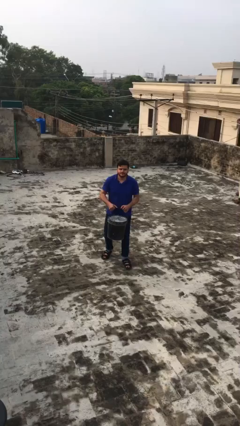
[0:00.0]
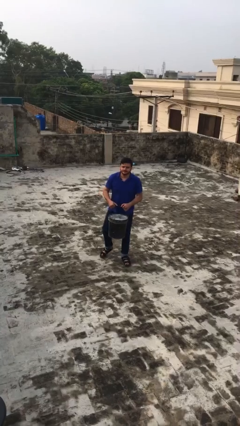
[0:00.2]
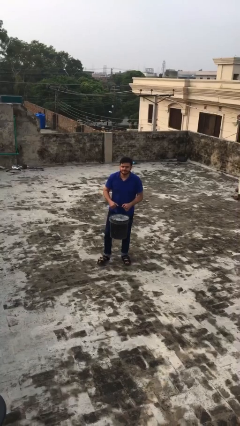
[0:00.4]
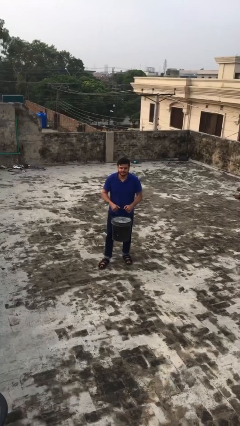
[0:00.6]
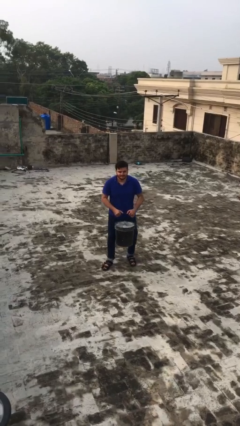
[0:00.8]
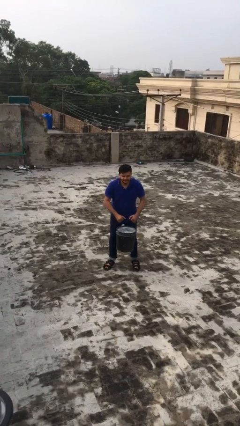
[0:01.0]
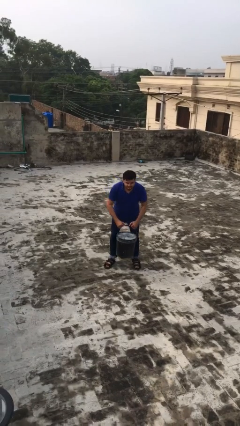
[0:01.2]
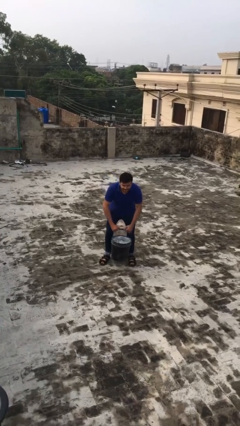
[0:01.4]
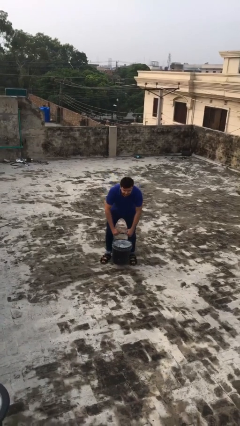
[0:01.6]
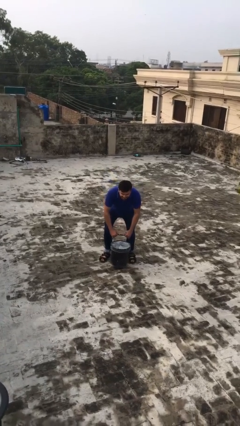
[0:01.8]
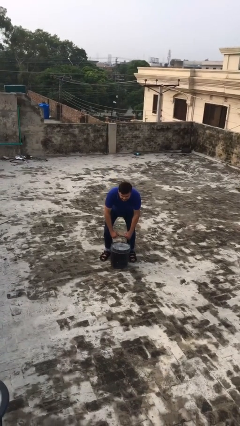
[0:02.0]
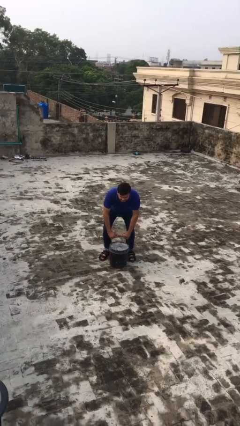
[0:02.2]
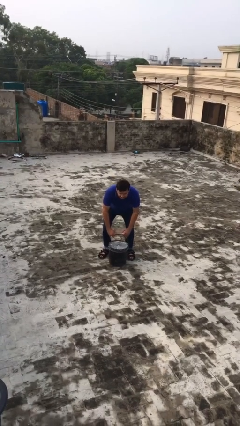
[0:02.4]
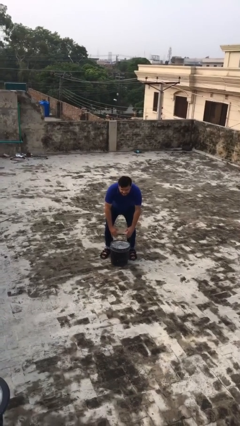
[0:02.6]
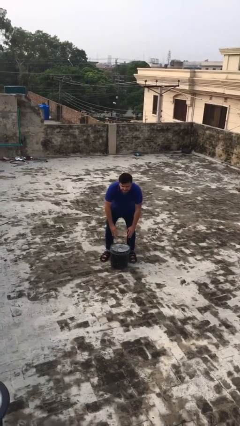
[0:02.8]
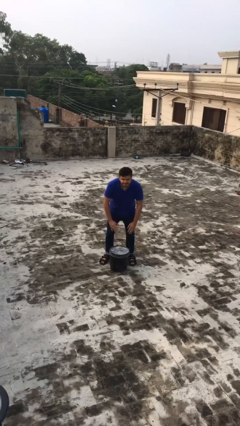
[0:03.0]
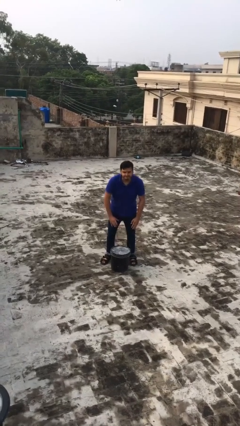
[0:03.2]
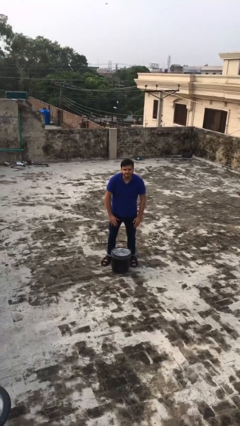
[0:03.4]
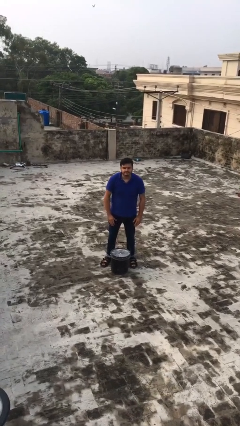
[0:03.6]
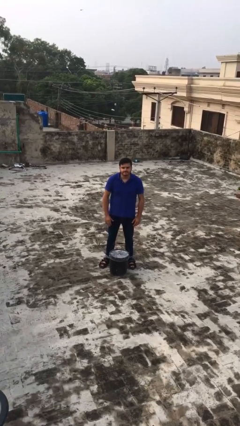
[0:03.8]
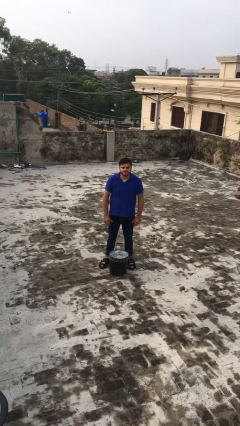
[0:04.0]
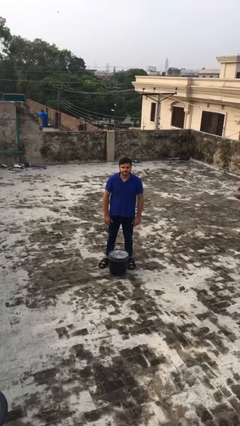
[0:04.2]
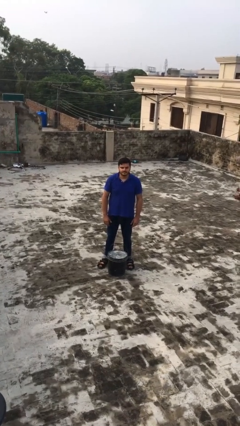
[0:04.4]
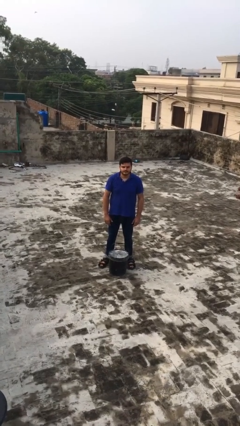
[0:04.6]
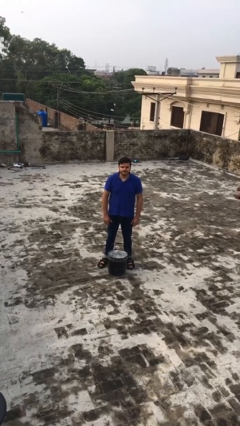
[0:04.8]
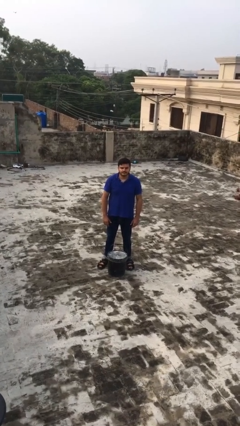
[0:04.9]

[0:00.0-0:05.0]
person puts down object on floor

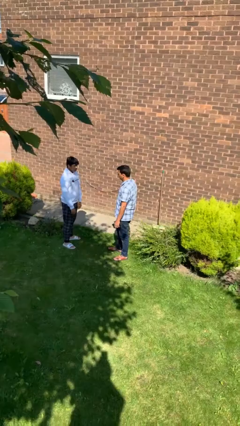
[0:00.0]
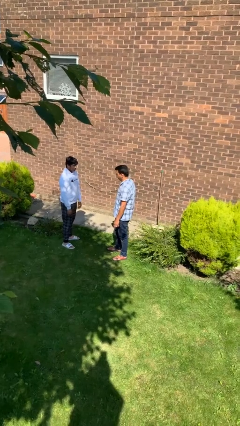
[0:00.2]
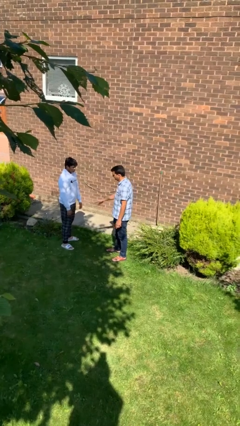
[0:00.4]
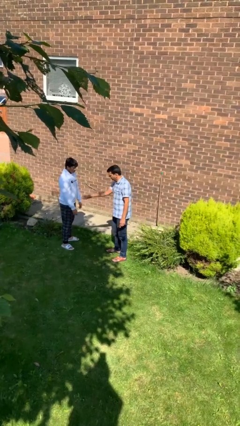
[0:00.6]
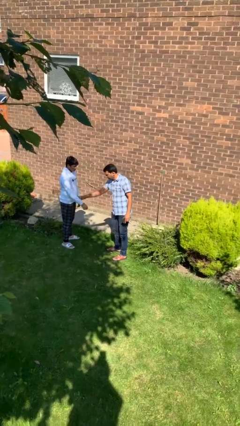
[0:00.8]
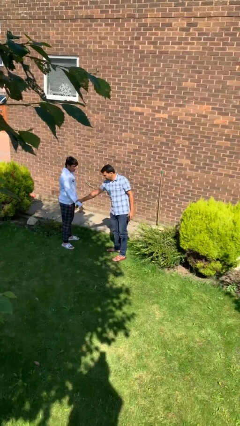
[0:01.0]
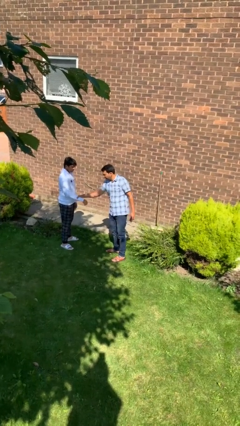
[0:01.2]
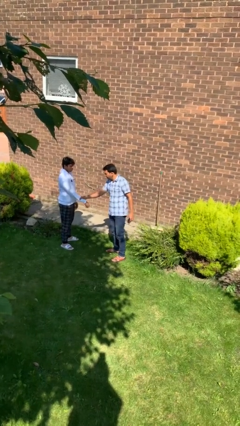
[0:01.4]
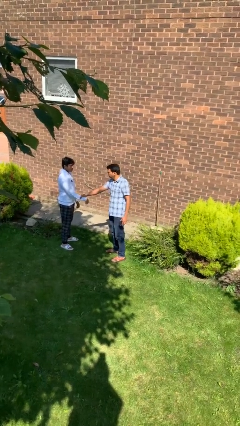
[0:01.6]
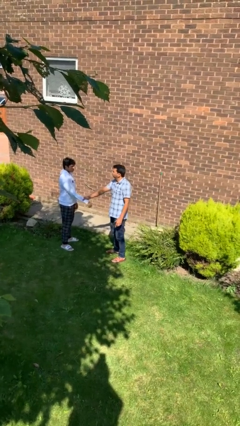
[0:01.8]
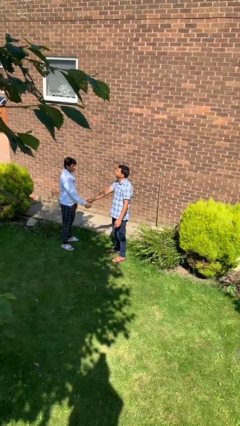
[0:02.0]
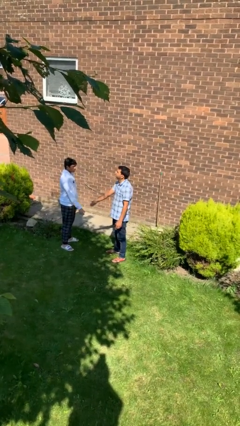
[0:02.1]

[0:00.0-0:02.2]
person grabs person by forearm

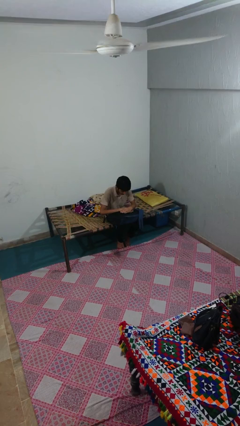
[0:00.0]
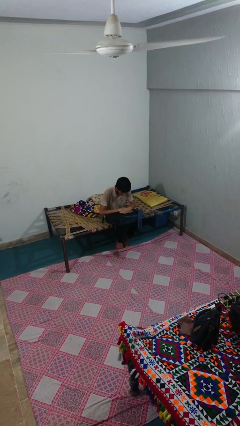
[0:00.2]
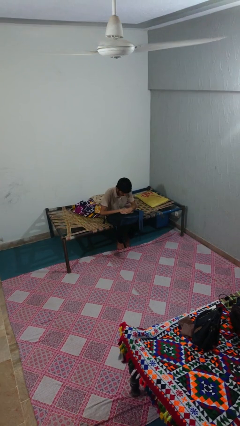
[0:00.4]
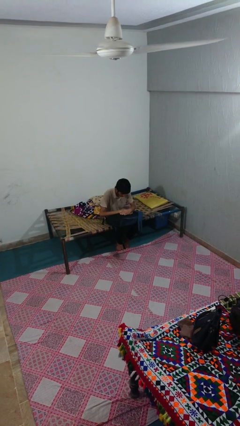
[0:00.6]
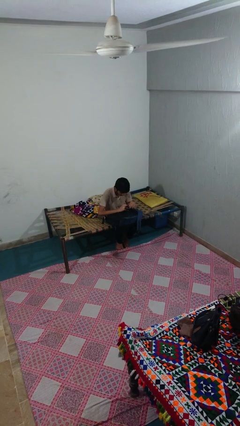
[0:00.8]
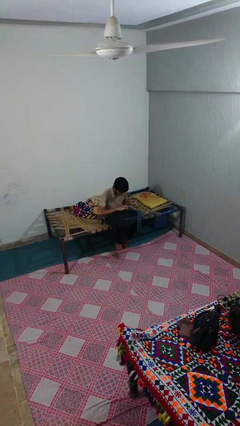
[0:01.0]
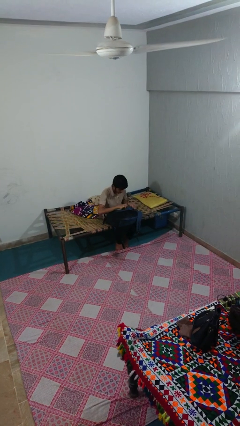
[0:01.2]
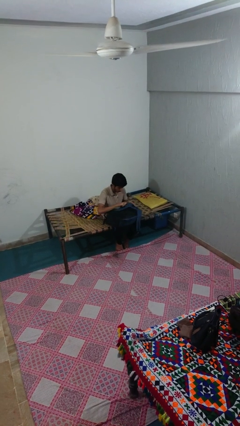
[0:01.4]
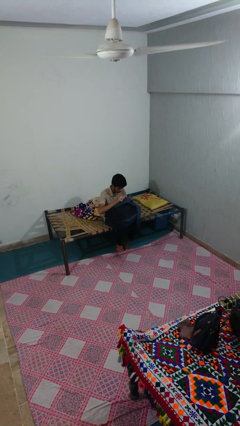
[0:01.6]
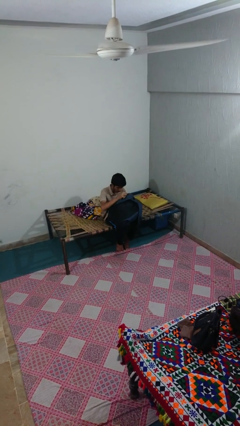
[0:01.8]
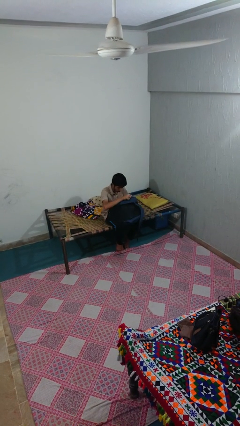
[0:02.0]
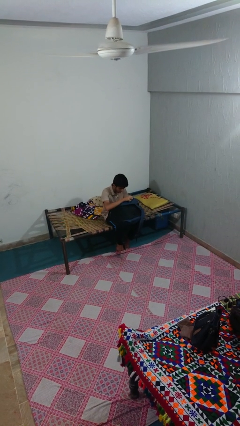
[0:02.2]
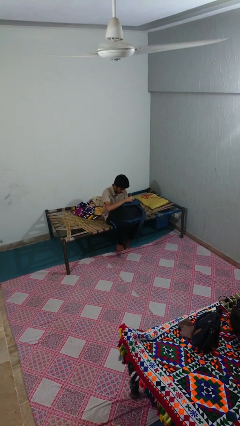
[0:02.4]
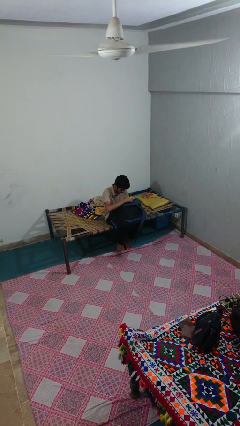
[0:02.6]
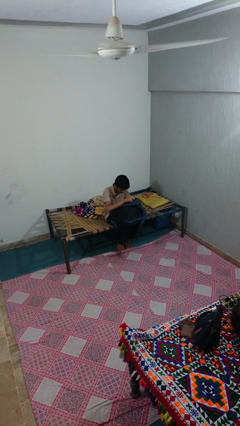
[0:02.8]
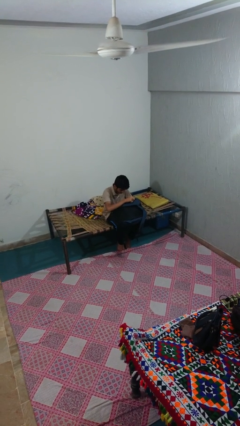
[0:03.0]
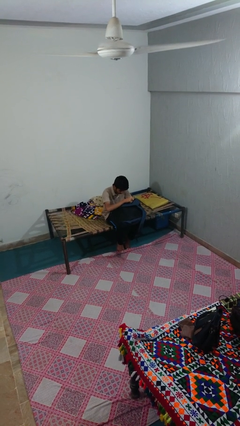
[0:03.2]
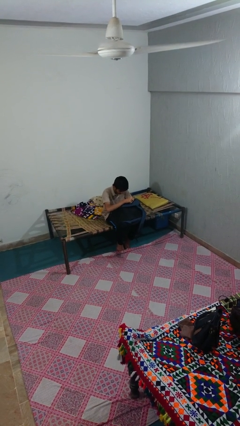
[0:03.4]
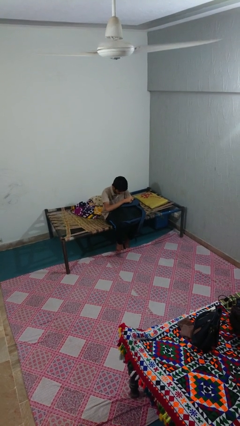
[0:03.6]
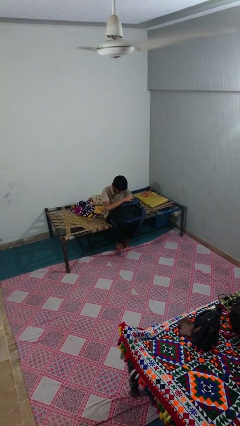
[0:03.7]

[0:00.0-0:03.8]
person searches in backpack

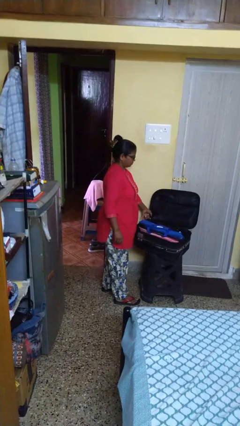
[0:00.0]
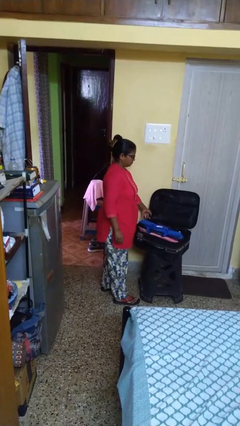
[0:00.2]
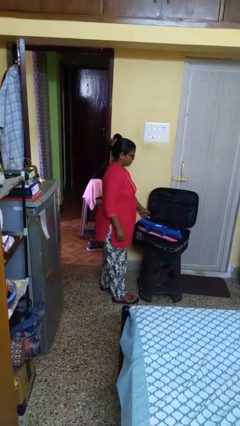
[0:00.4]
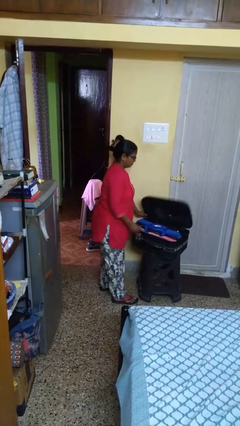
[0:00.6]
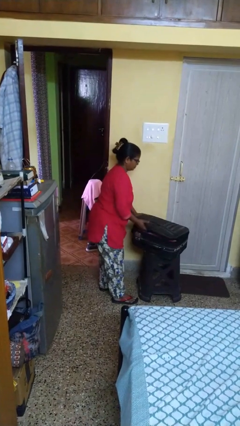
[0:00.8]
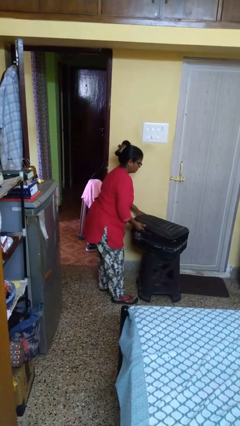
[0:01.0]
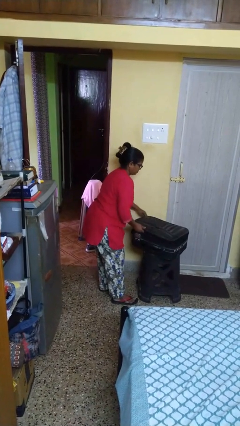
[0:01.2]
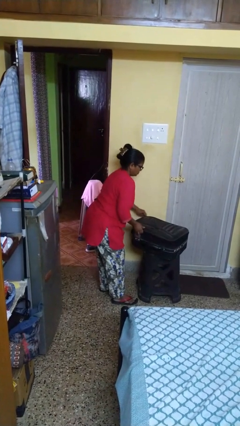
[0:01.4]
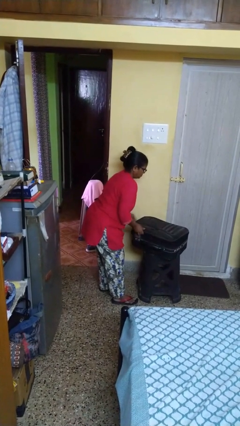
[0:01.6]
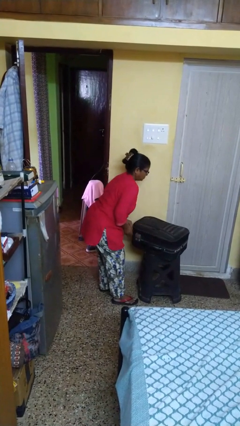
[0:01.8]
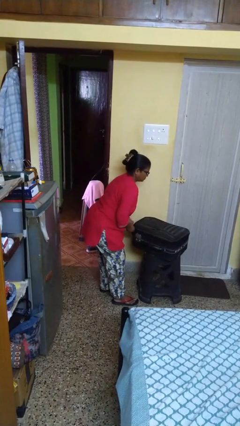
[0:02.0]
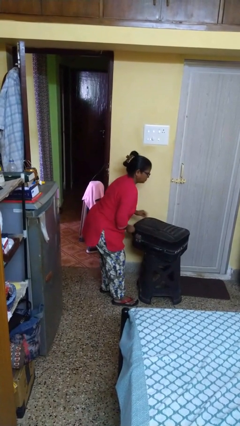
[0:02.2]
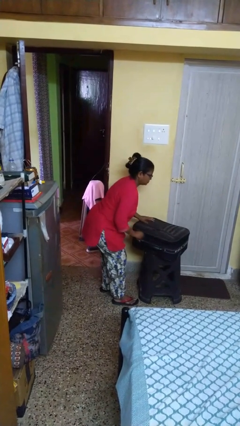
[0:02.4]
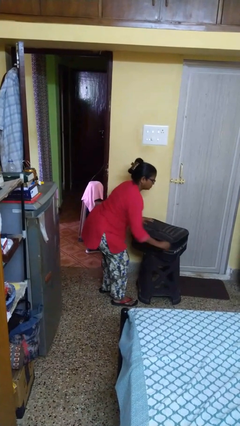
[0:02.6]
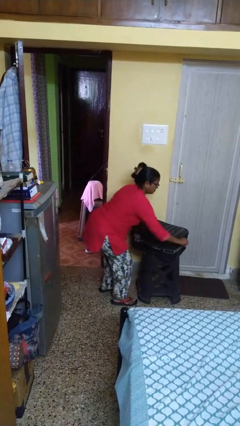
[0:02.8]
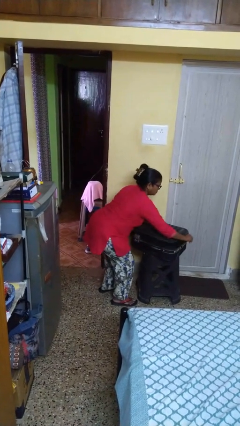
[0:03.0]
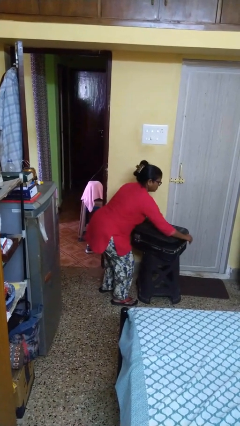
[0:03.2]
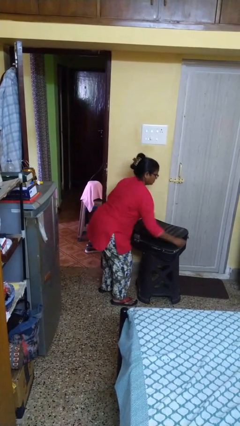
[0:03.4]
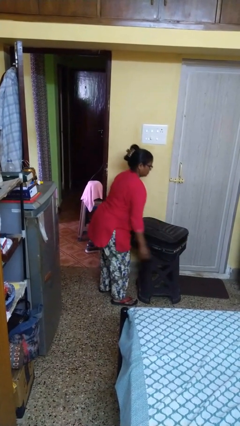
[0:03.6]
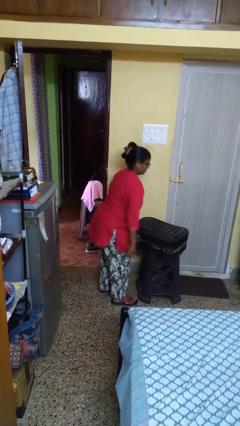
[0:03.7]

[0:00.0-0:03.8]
person closes suitcase

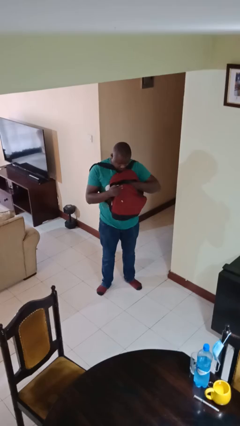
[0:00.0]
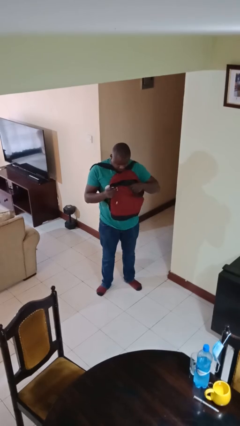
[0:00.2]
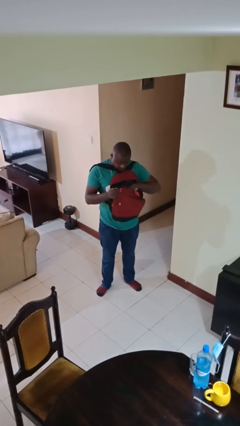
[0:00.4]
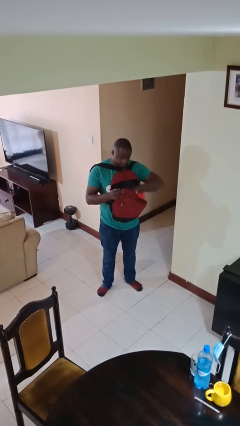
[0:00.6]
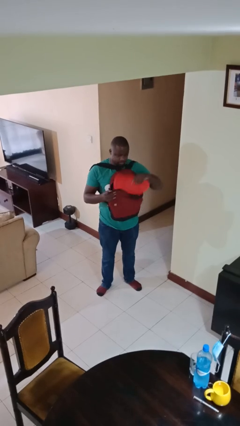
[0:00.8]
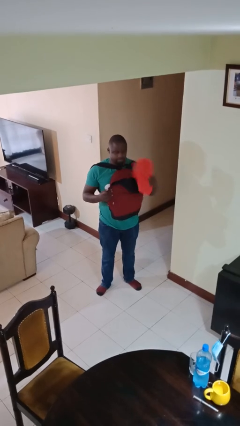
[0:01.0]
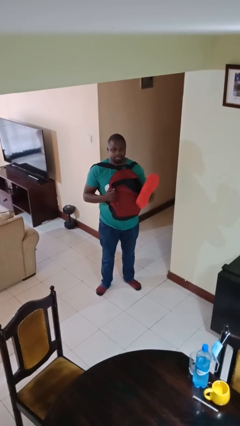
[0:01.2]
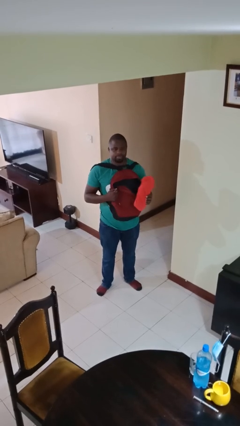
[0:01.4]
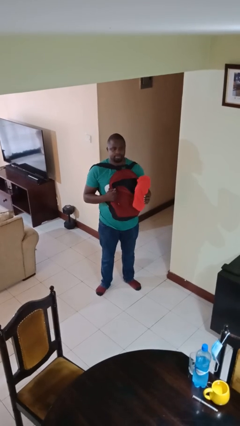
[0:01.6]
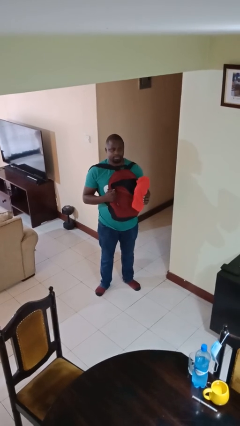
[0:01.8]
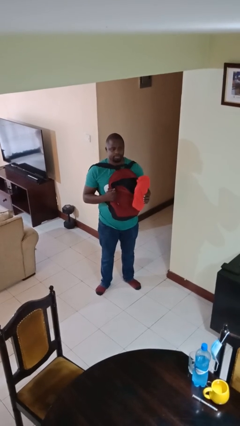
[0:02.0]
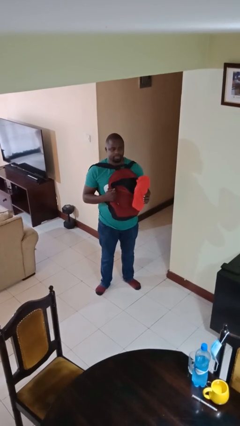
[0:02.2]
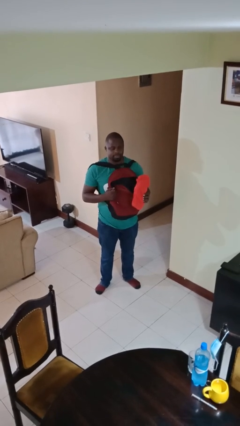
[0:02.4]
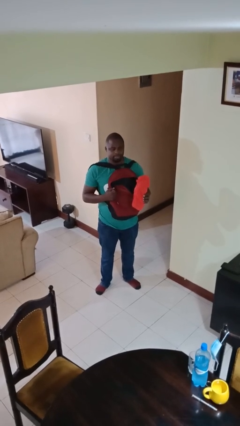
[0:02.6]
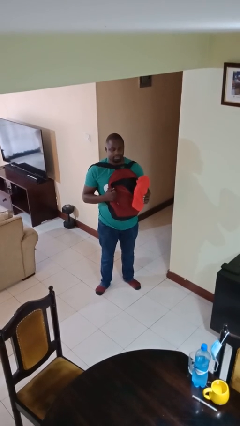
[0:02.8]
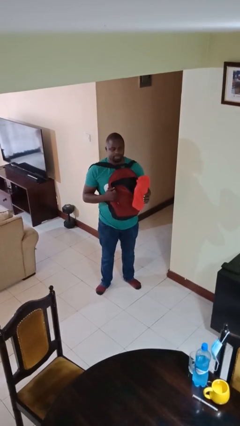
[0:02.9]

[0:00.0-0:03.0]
person takes object from backpack
